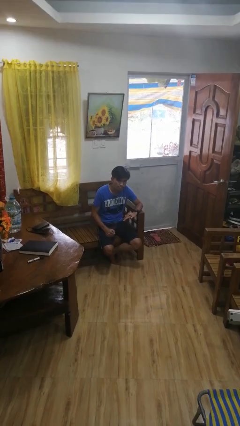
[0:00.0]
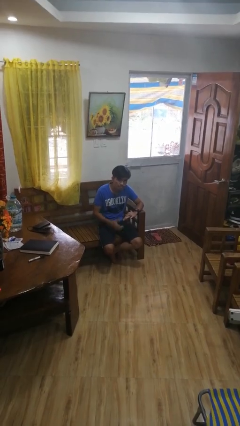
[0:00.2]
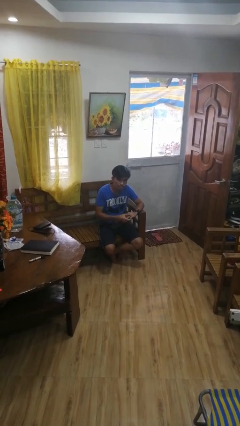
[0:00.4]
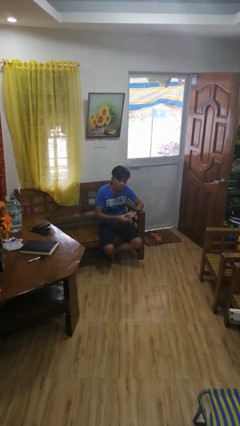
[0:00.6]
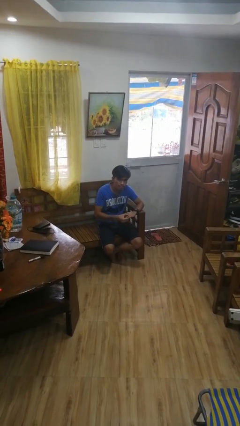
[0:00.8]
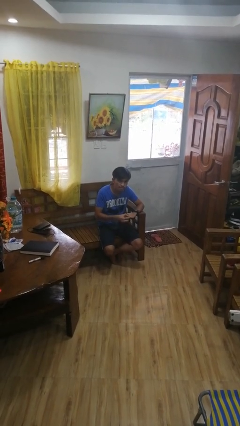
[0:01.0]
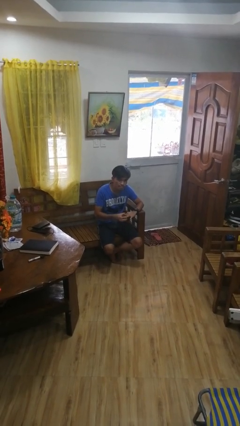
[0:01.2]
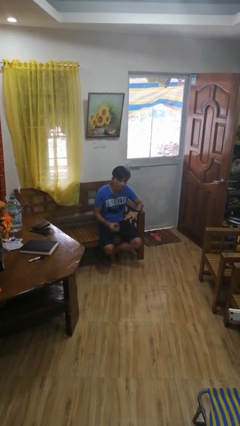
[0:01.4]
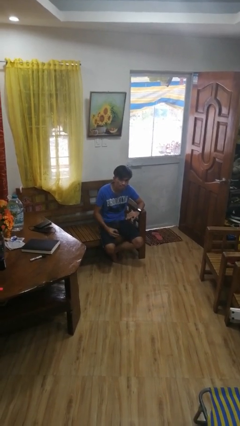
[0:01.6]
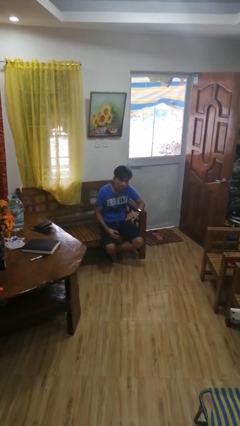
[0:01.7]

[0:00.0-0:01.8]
person takes off ring

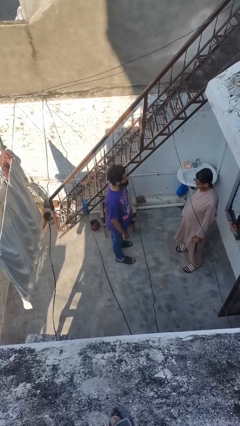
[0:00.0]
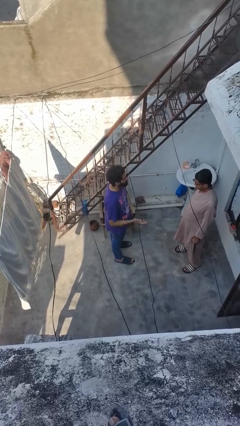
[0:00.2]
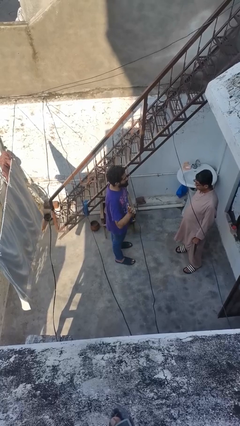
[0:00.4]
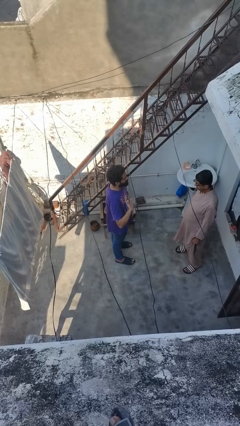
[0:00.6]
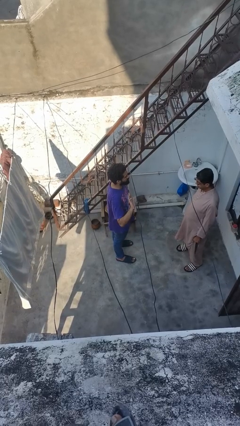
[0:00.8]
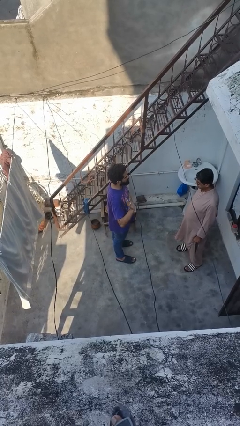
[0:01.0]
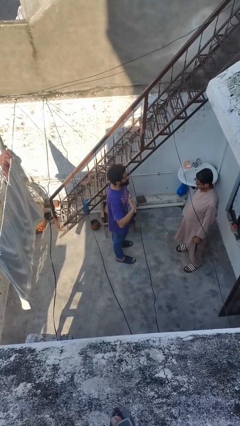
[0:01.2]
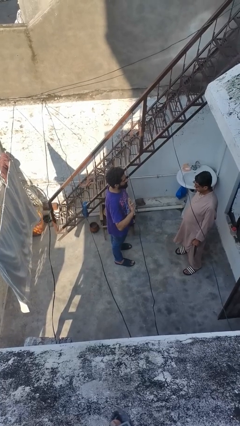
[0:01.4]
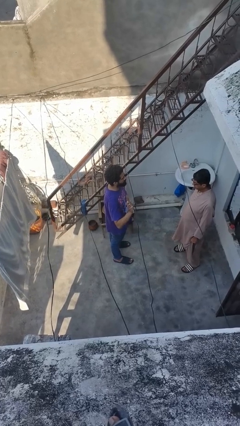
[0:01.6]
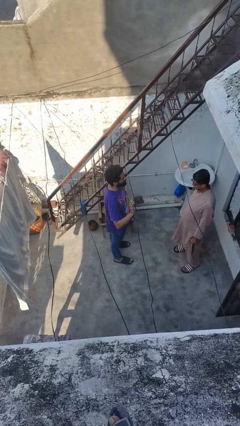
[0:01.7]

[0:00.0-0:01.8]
person waves at person

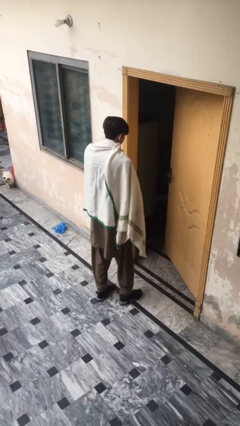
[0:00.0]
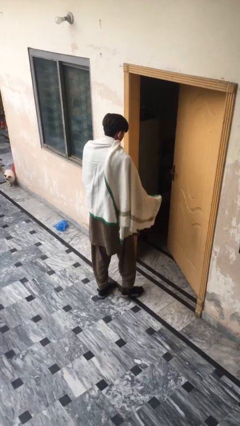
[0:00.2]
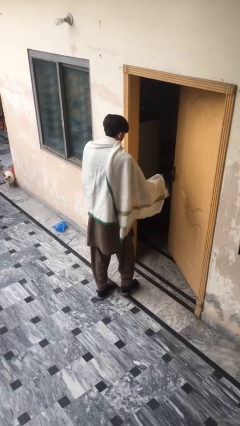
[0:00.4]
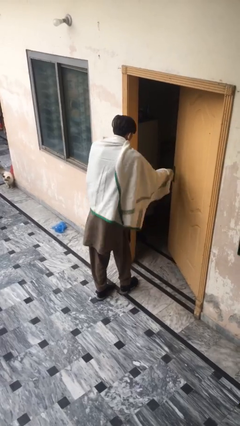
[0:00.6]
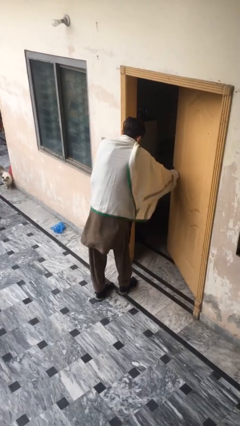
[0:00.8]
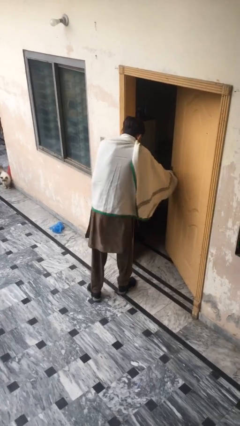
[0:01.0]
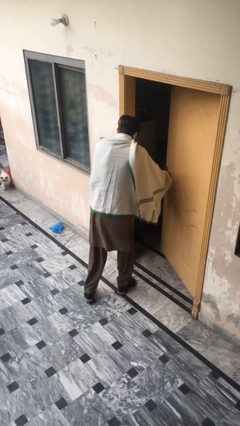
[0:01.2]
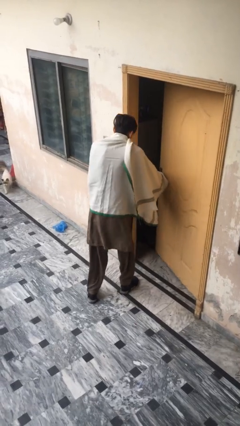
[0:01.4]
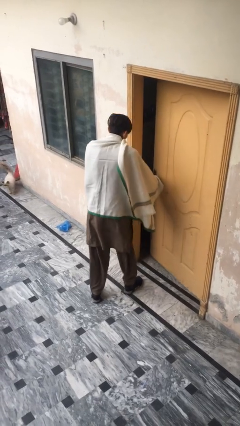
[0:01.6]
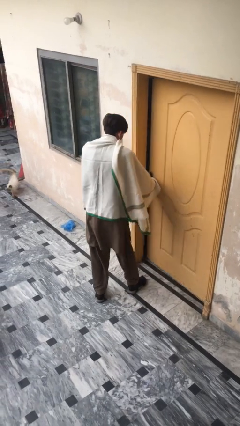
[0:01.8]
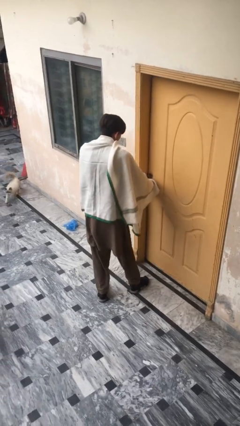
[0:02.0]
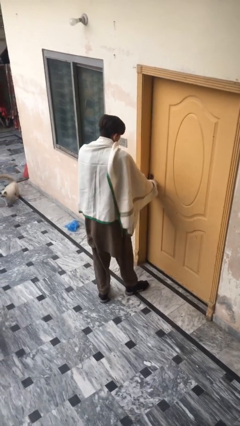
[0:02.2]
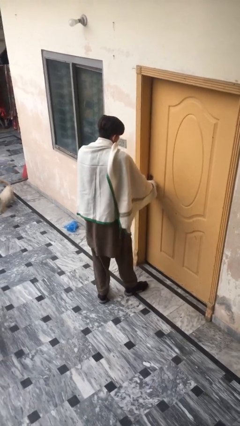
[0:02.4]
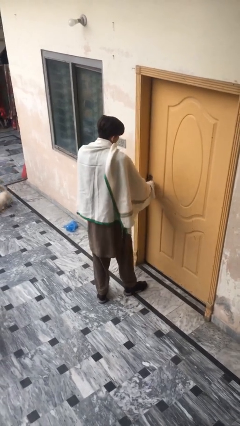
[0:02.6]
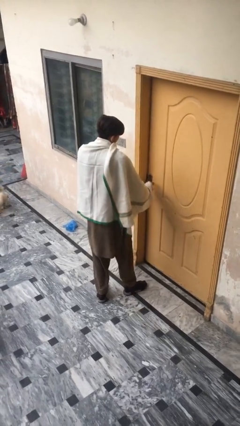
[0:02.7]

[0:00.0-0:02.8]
person closes facility door

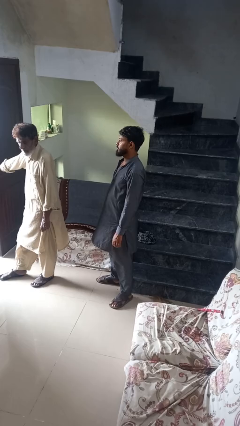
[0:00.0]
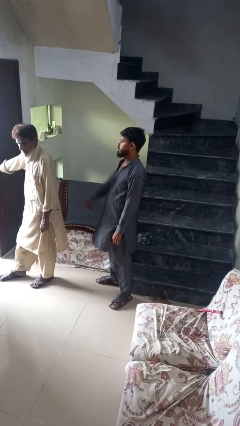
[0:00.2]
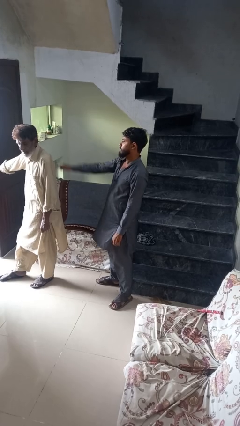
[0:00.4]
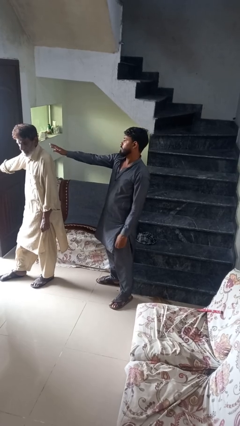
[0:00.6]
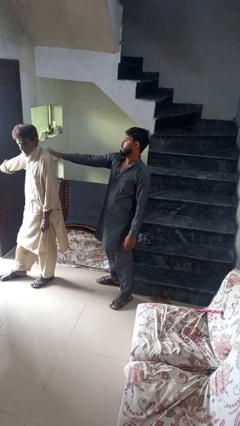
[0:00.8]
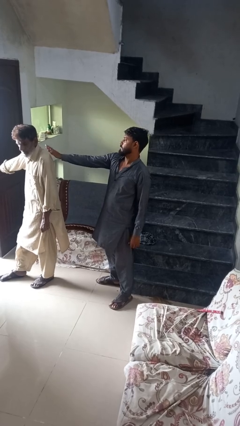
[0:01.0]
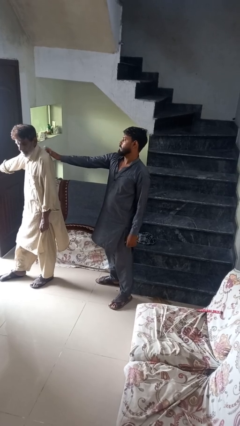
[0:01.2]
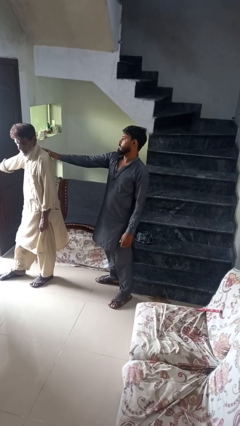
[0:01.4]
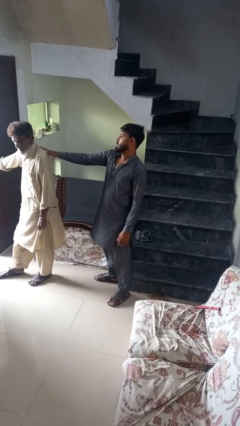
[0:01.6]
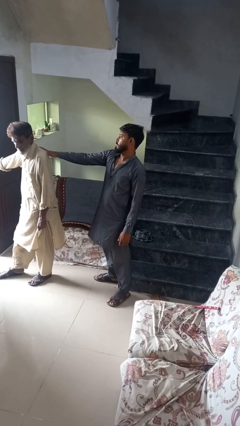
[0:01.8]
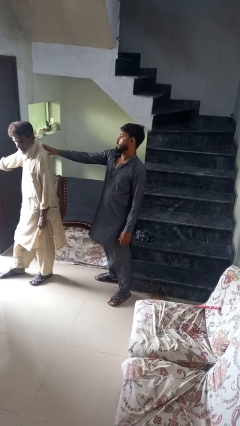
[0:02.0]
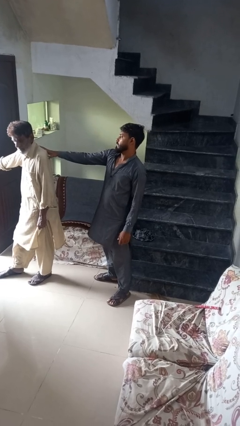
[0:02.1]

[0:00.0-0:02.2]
person touches back of person

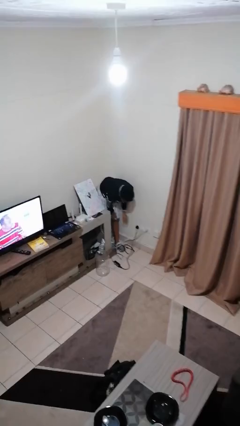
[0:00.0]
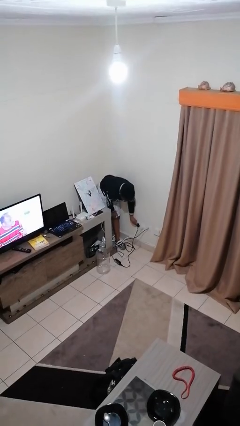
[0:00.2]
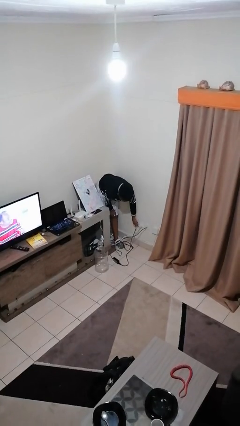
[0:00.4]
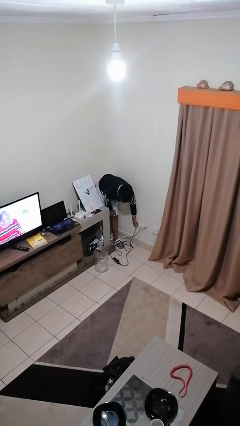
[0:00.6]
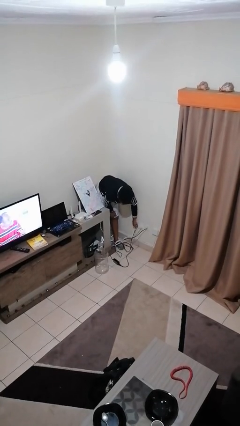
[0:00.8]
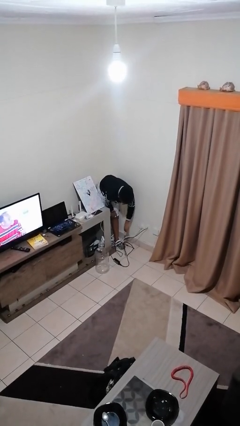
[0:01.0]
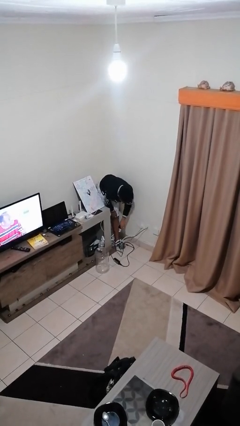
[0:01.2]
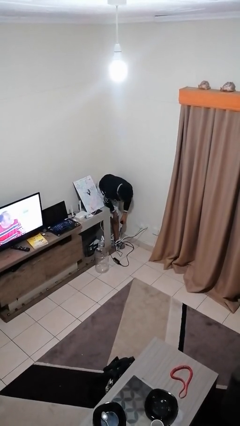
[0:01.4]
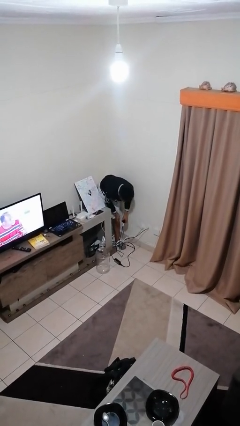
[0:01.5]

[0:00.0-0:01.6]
person unplugs from electrical socket

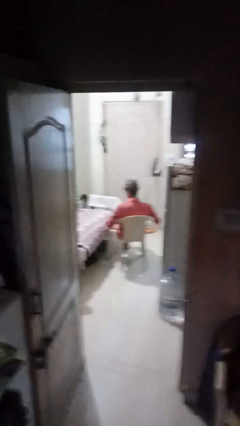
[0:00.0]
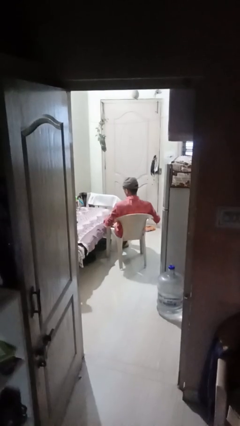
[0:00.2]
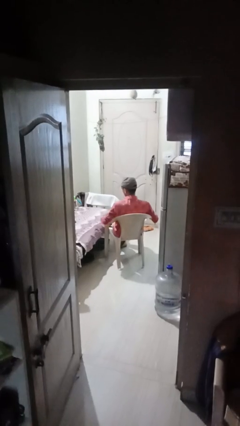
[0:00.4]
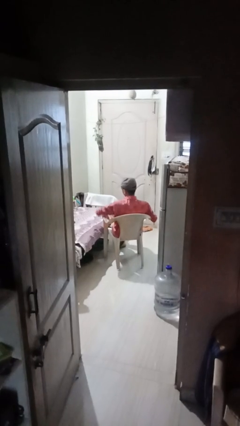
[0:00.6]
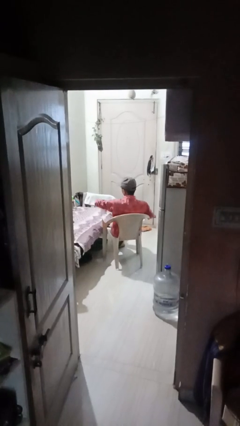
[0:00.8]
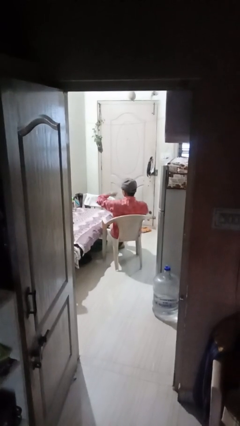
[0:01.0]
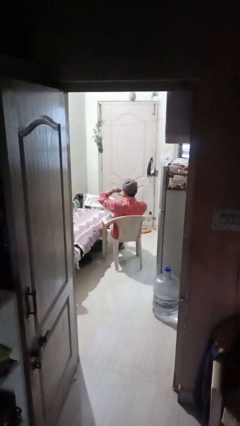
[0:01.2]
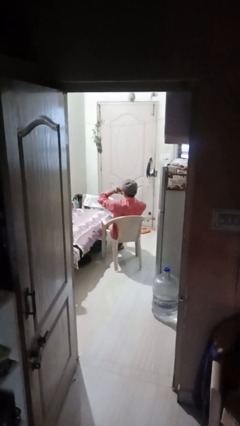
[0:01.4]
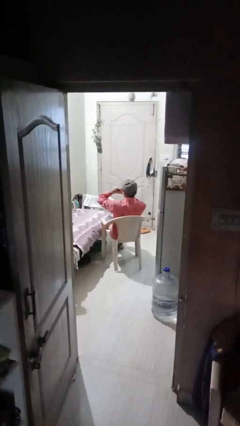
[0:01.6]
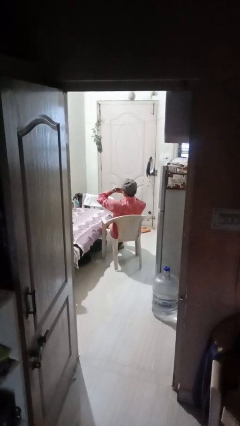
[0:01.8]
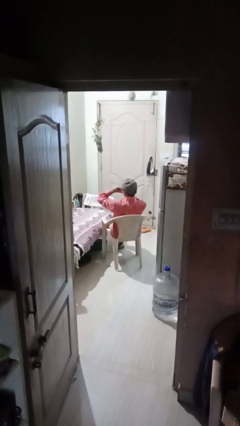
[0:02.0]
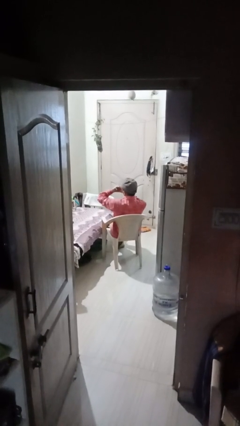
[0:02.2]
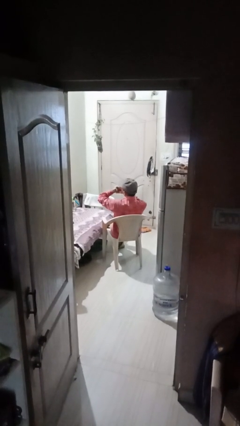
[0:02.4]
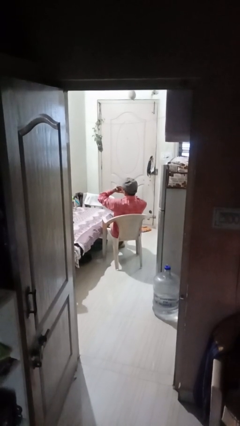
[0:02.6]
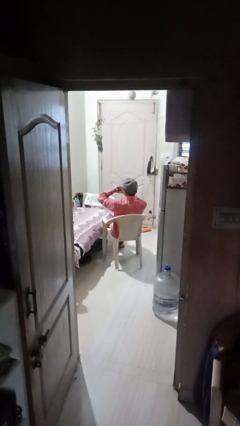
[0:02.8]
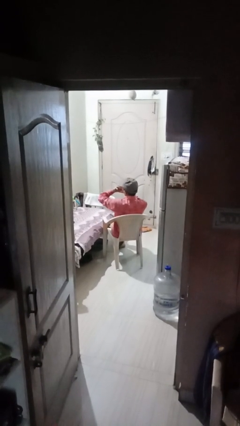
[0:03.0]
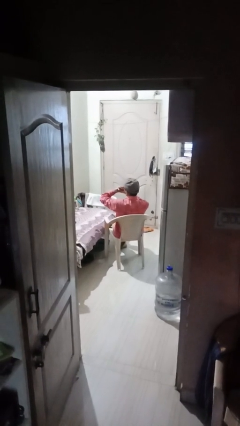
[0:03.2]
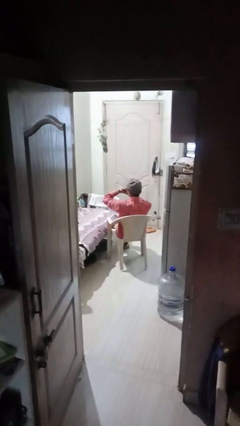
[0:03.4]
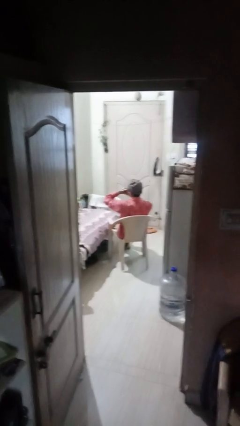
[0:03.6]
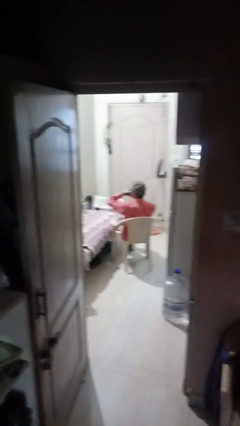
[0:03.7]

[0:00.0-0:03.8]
person looks at wristwatch

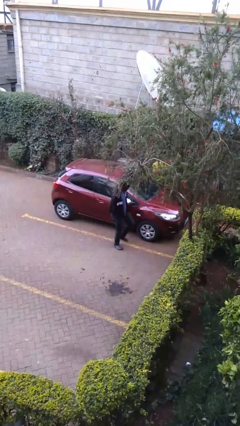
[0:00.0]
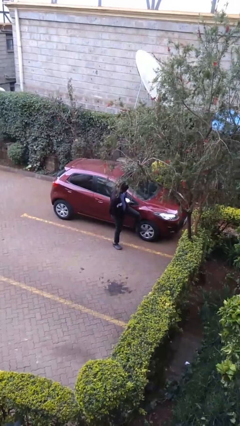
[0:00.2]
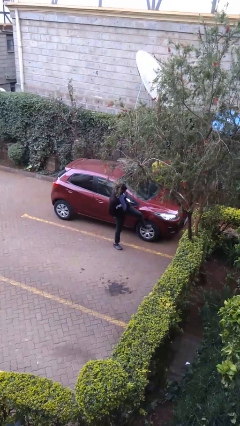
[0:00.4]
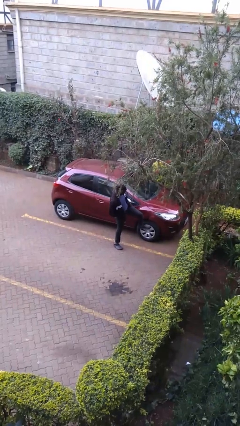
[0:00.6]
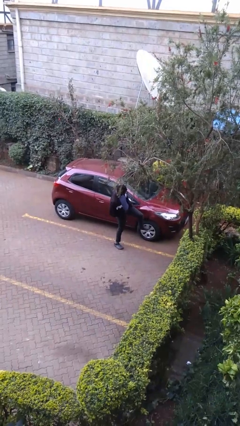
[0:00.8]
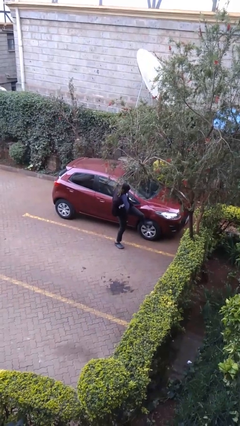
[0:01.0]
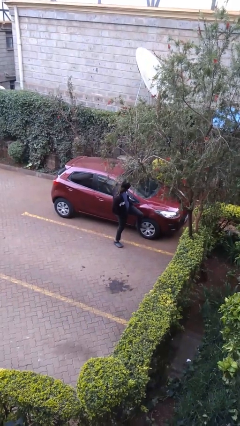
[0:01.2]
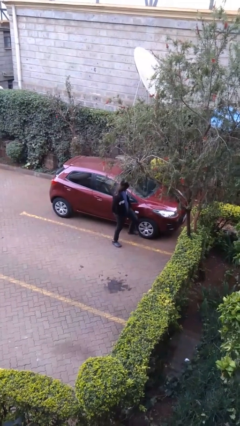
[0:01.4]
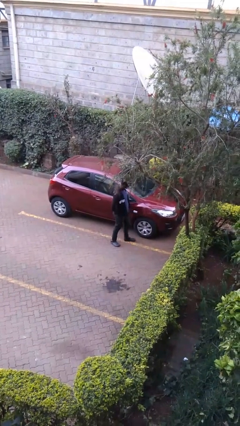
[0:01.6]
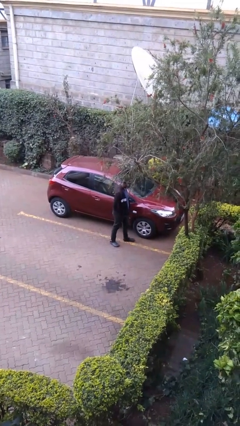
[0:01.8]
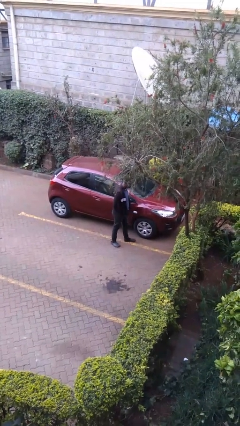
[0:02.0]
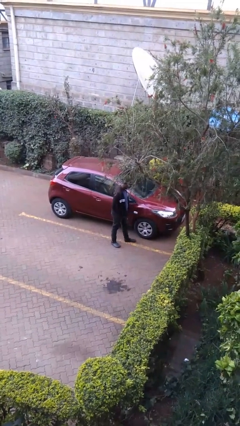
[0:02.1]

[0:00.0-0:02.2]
person kicks car tires

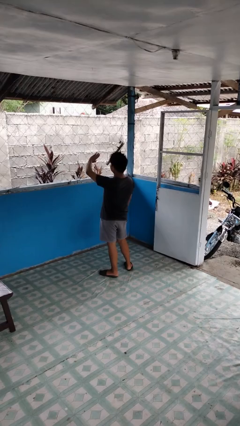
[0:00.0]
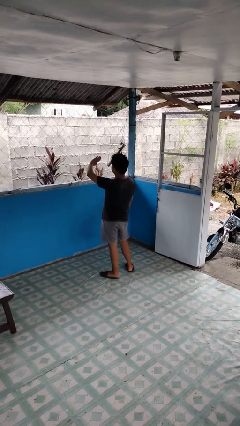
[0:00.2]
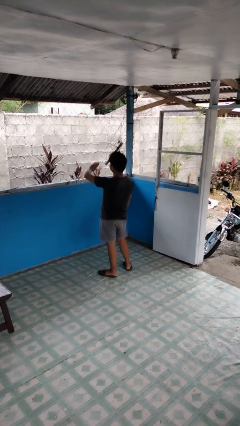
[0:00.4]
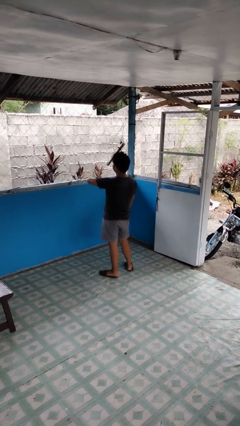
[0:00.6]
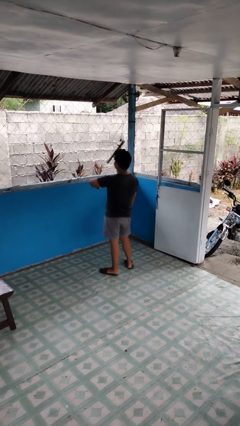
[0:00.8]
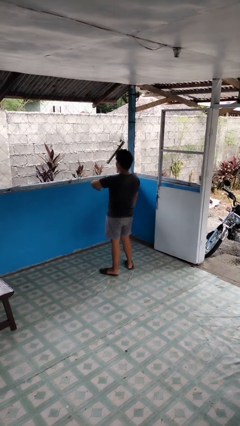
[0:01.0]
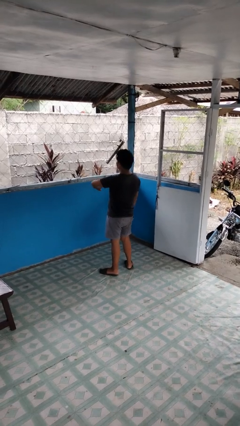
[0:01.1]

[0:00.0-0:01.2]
person gestures swipe down
